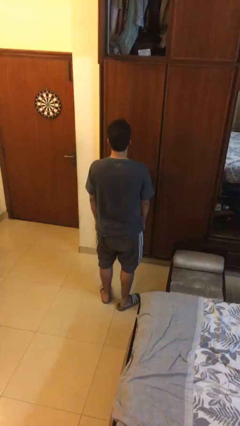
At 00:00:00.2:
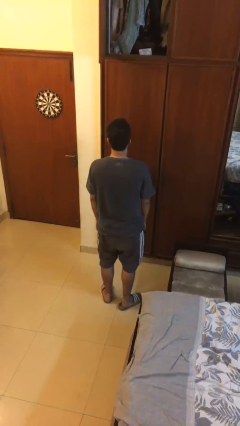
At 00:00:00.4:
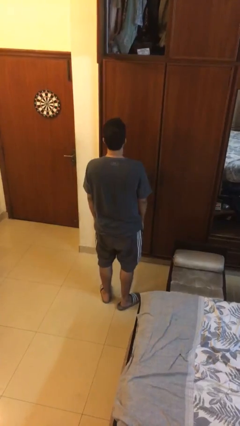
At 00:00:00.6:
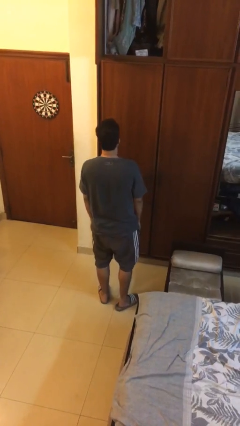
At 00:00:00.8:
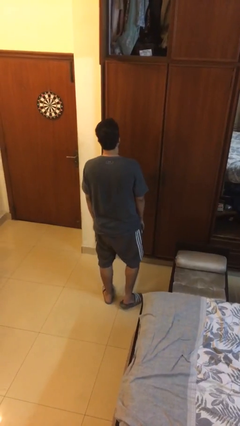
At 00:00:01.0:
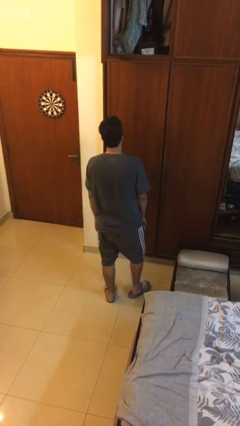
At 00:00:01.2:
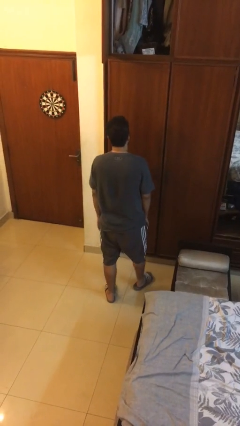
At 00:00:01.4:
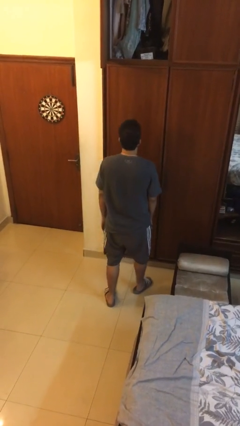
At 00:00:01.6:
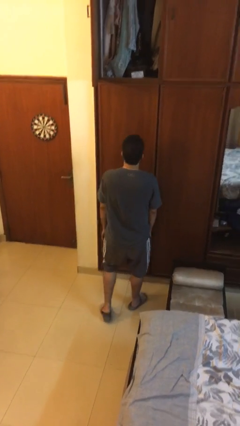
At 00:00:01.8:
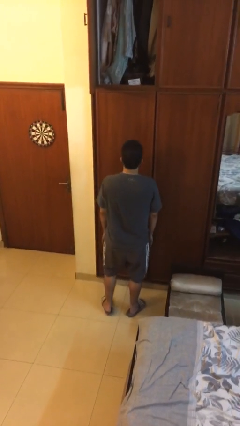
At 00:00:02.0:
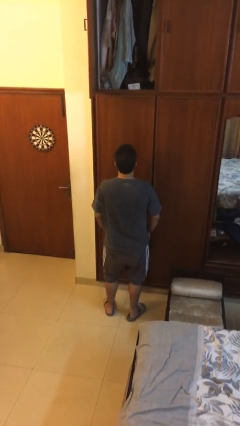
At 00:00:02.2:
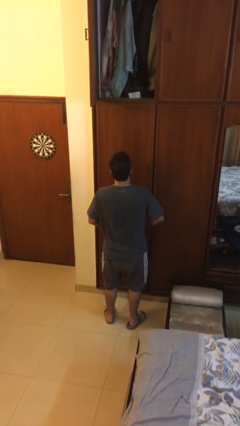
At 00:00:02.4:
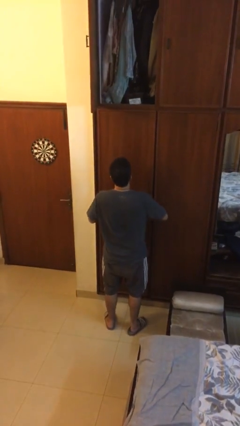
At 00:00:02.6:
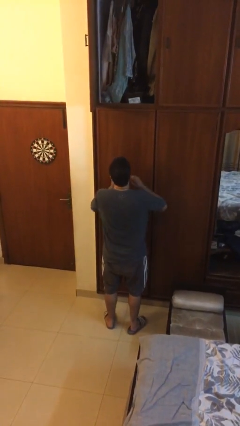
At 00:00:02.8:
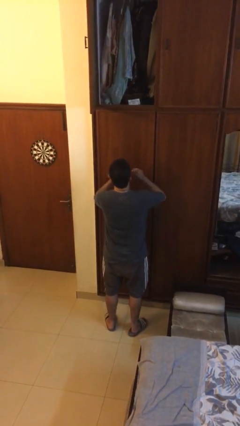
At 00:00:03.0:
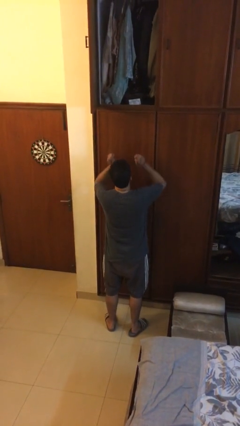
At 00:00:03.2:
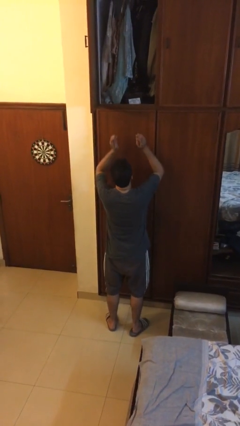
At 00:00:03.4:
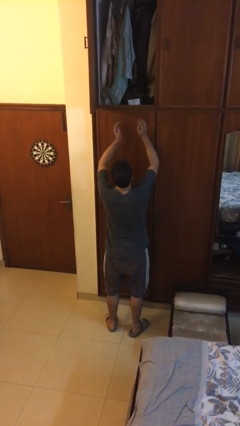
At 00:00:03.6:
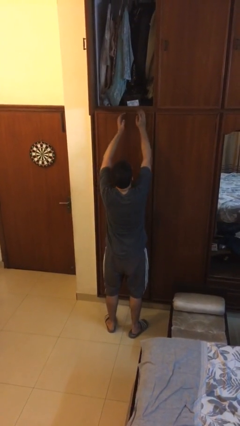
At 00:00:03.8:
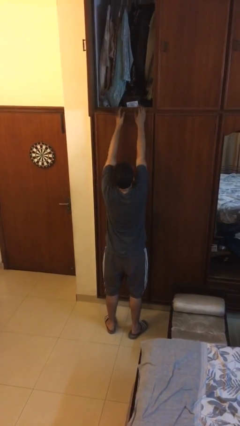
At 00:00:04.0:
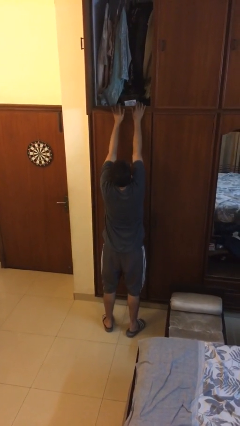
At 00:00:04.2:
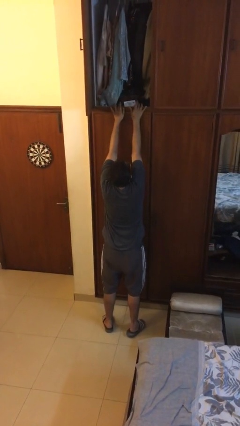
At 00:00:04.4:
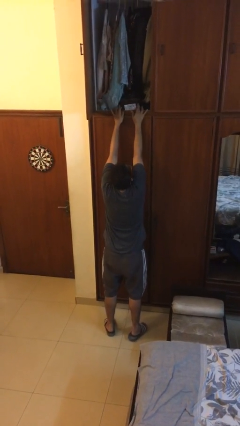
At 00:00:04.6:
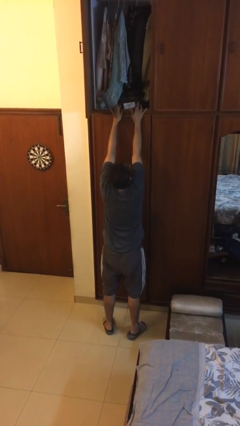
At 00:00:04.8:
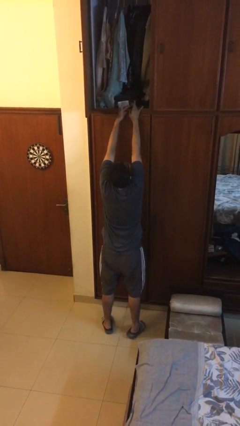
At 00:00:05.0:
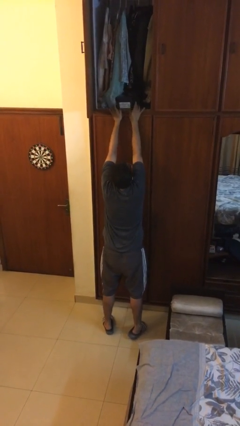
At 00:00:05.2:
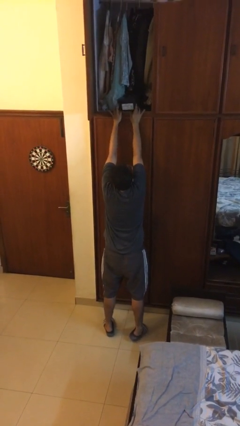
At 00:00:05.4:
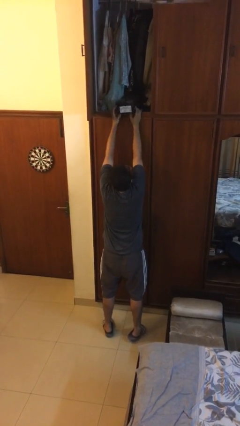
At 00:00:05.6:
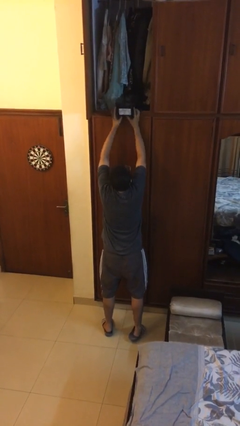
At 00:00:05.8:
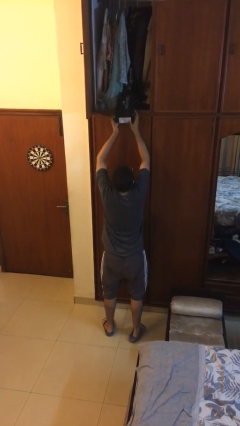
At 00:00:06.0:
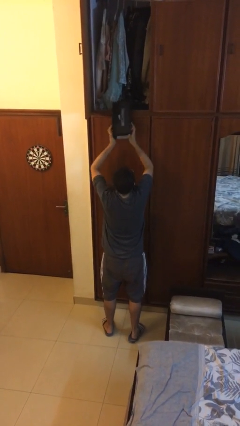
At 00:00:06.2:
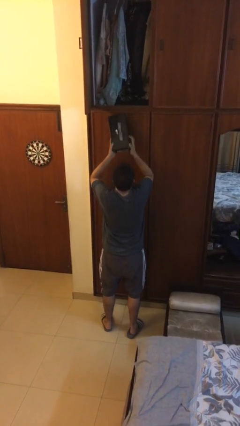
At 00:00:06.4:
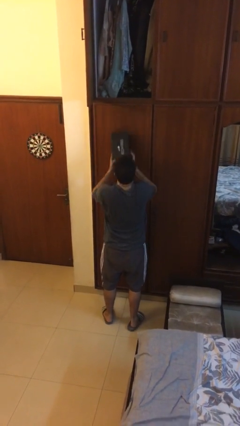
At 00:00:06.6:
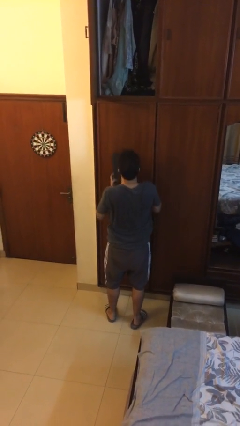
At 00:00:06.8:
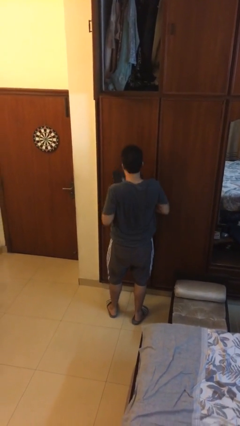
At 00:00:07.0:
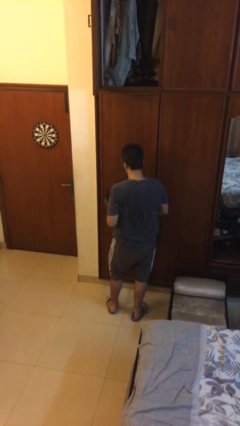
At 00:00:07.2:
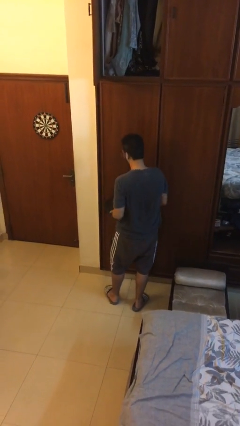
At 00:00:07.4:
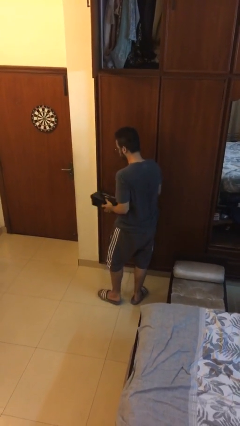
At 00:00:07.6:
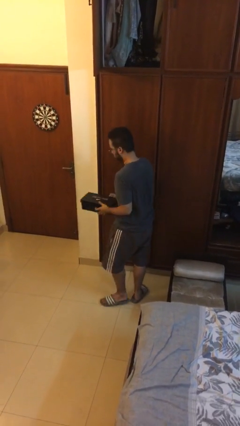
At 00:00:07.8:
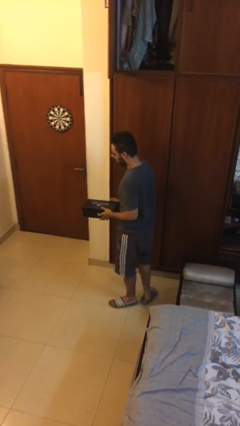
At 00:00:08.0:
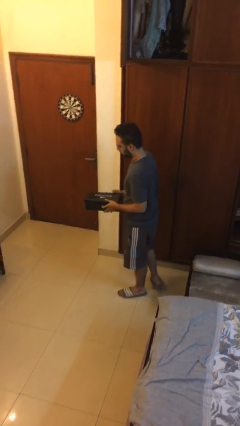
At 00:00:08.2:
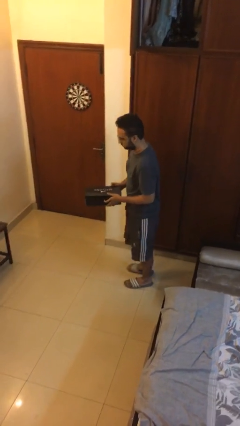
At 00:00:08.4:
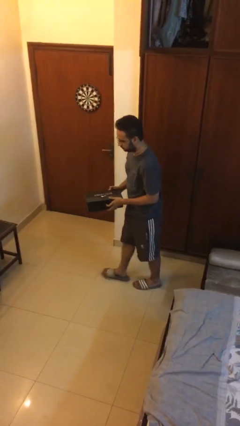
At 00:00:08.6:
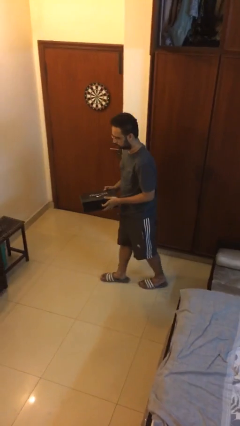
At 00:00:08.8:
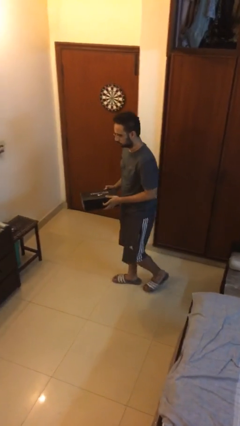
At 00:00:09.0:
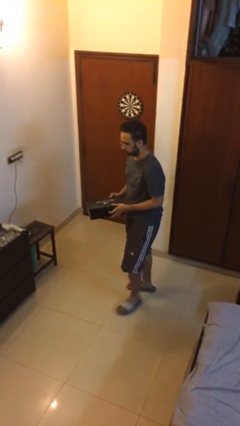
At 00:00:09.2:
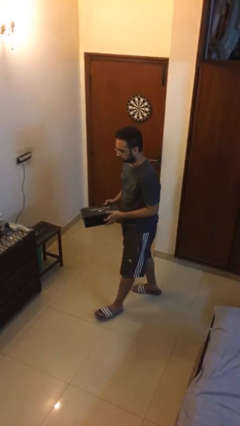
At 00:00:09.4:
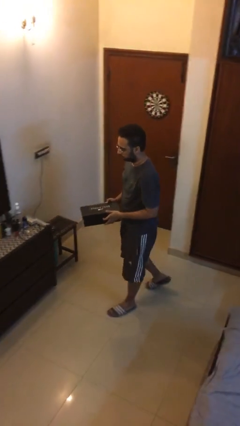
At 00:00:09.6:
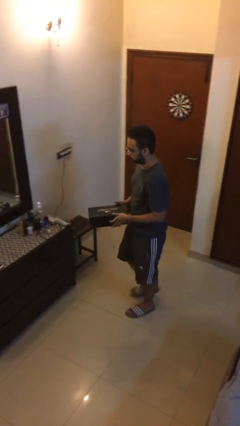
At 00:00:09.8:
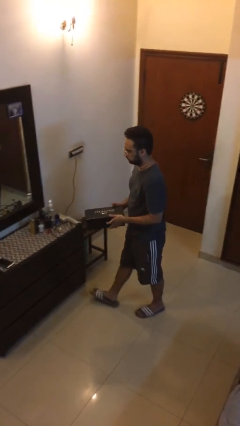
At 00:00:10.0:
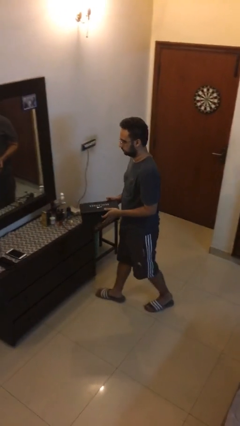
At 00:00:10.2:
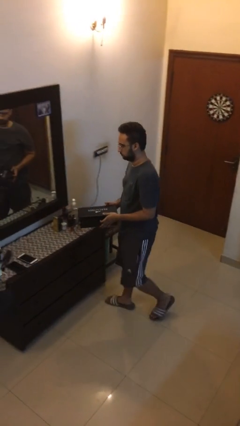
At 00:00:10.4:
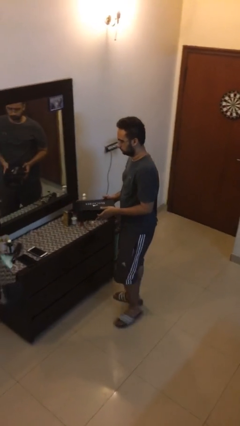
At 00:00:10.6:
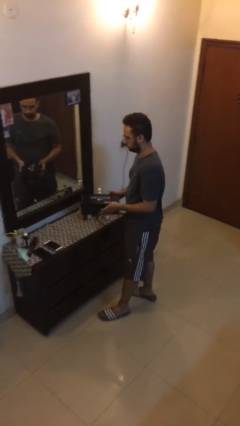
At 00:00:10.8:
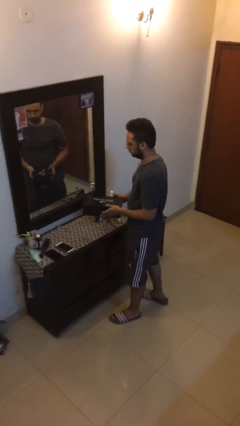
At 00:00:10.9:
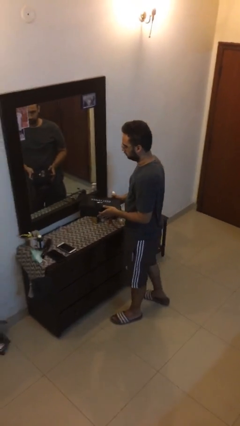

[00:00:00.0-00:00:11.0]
person picks up object from shelf

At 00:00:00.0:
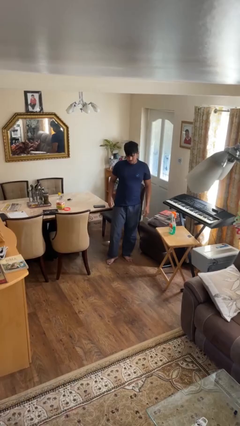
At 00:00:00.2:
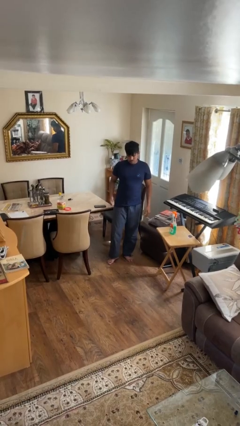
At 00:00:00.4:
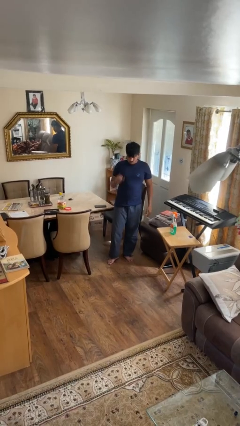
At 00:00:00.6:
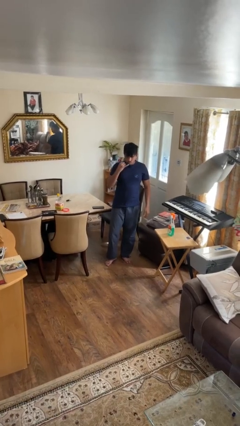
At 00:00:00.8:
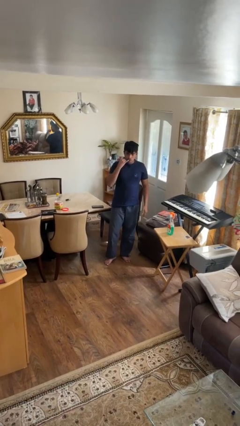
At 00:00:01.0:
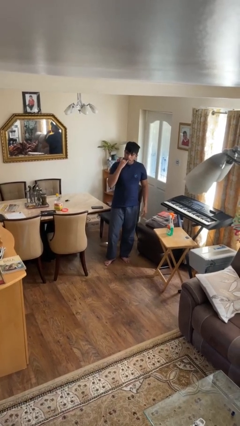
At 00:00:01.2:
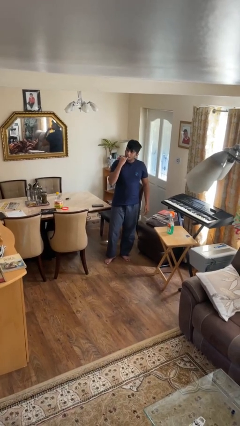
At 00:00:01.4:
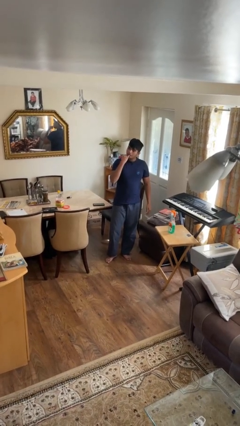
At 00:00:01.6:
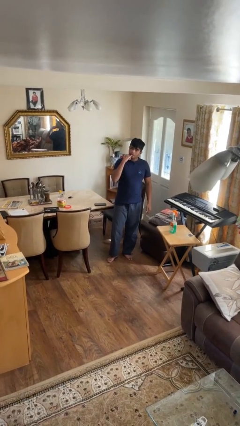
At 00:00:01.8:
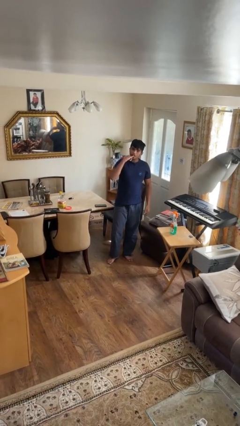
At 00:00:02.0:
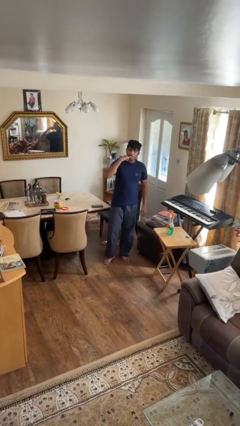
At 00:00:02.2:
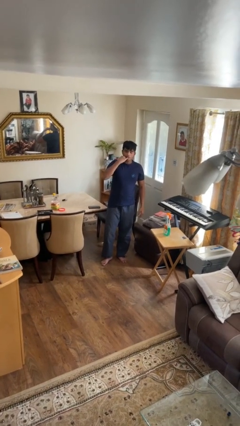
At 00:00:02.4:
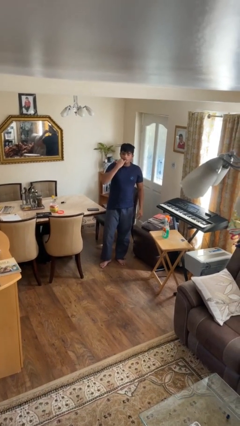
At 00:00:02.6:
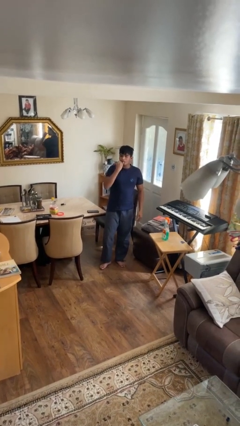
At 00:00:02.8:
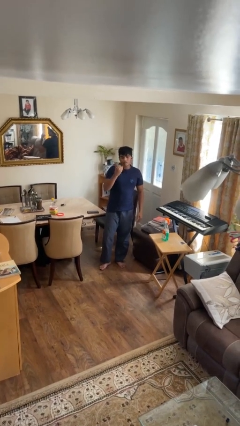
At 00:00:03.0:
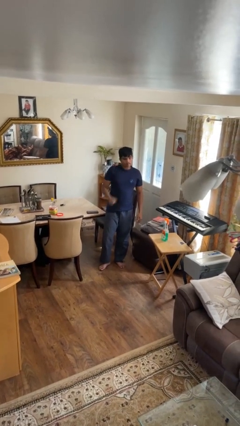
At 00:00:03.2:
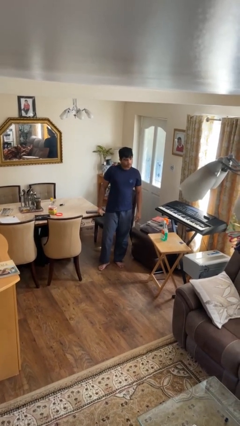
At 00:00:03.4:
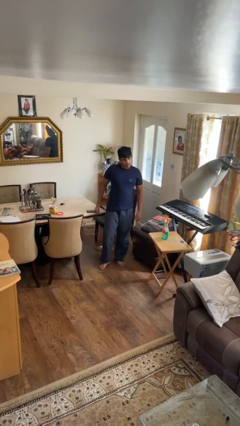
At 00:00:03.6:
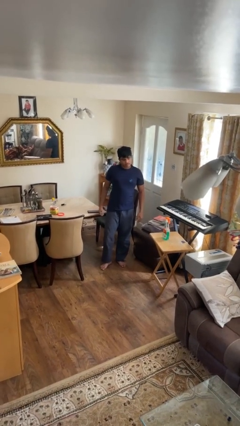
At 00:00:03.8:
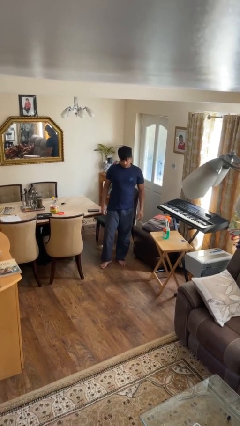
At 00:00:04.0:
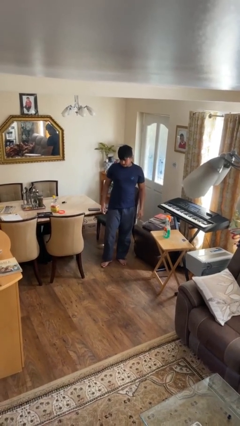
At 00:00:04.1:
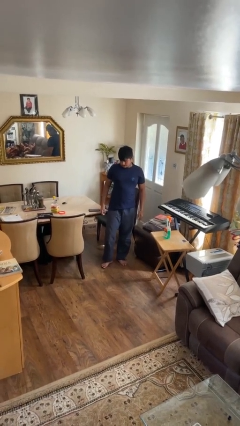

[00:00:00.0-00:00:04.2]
person licks fingers

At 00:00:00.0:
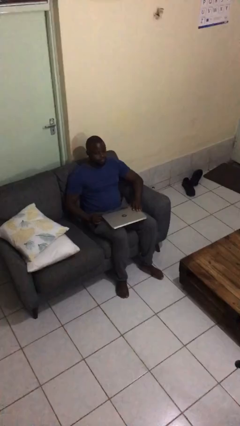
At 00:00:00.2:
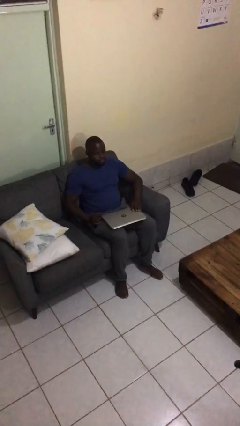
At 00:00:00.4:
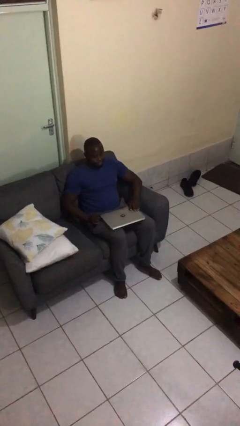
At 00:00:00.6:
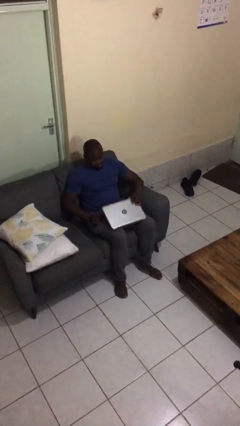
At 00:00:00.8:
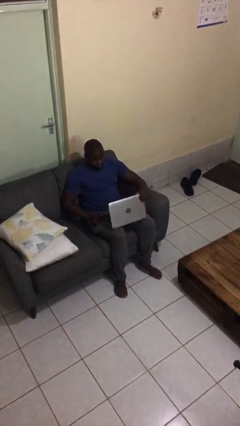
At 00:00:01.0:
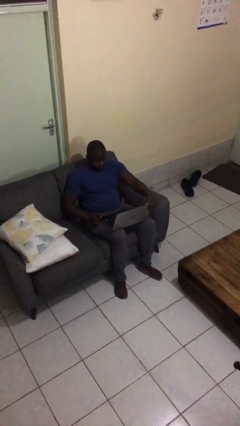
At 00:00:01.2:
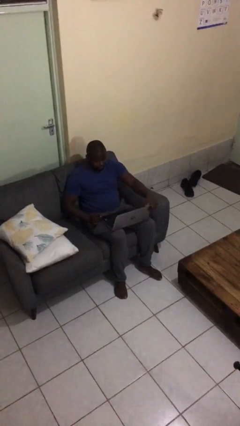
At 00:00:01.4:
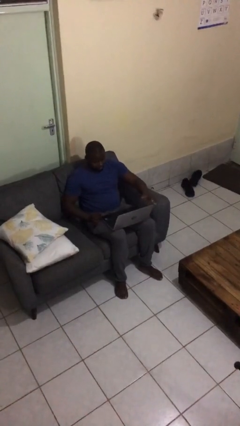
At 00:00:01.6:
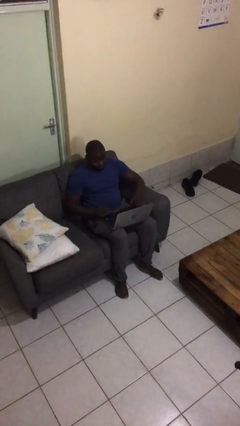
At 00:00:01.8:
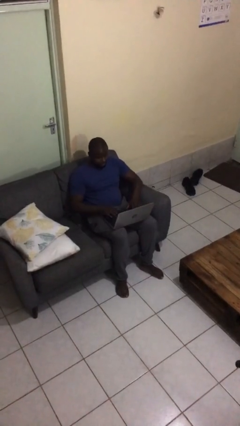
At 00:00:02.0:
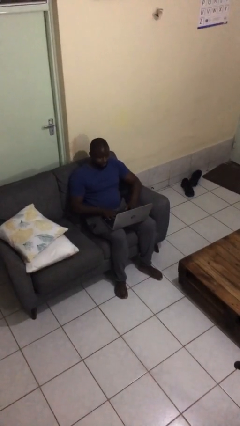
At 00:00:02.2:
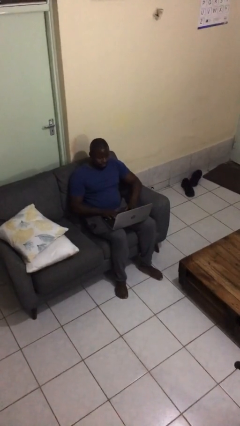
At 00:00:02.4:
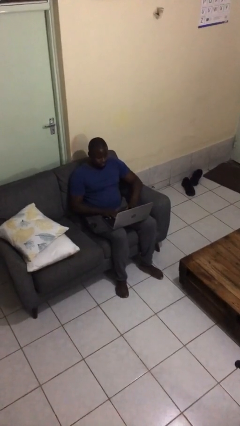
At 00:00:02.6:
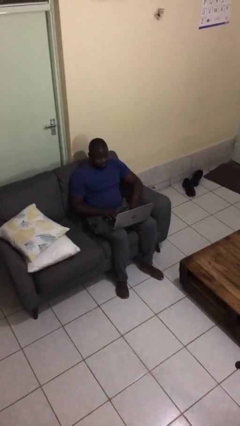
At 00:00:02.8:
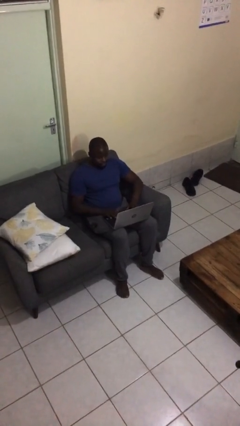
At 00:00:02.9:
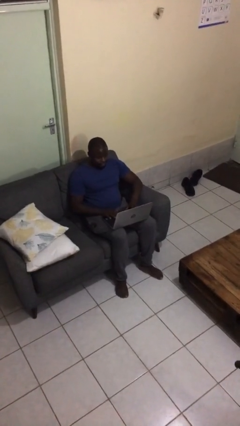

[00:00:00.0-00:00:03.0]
person opens laptop
